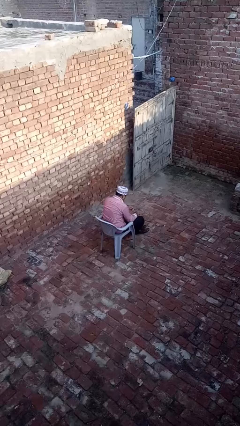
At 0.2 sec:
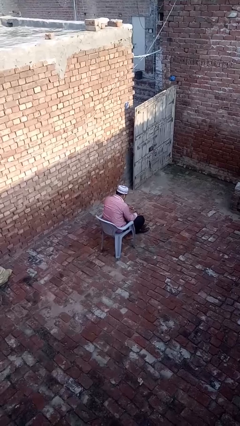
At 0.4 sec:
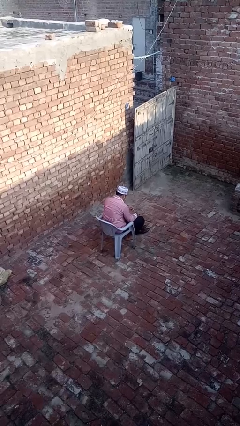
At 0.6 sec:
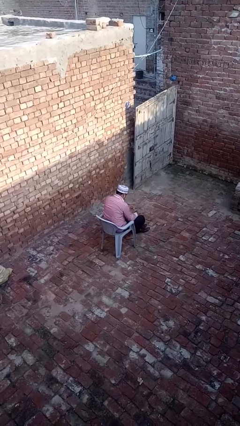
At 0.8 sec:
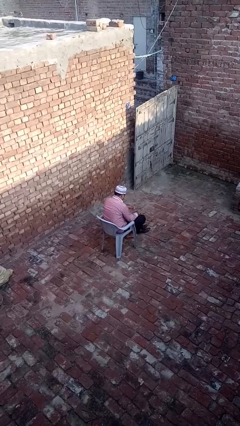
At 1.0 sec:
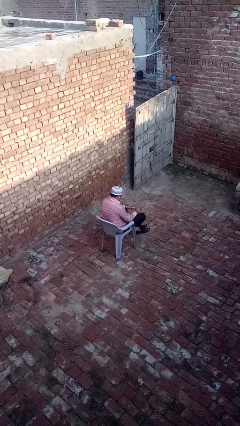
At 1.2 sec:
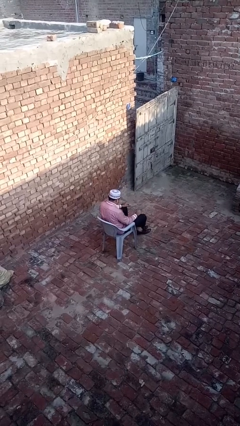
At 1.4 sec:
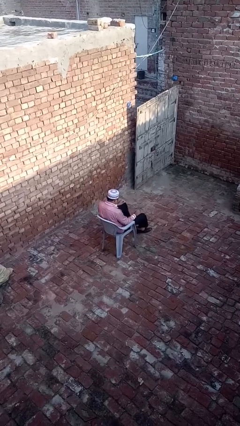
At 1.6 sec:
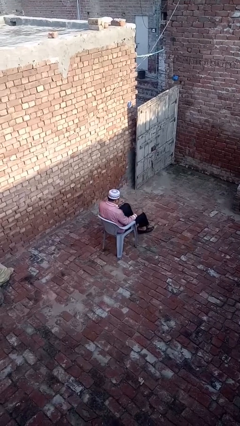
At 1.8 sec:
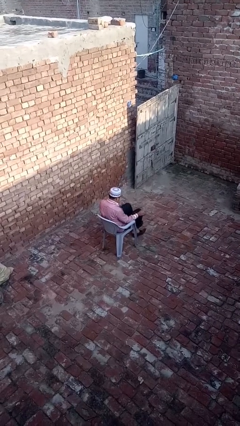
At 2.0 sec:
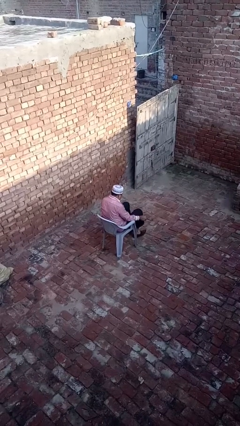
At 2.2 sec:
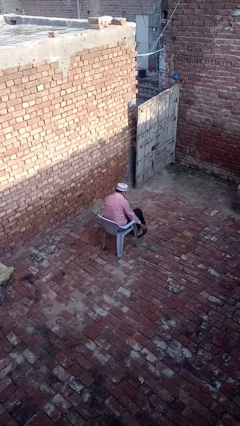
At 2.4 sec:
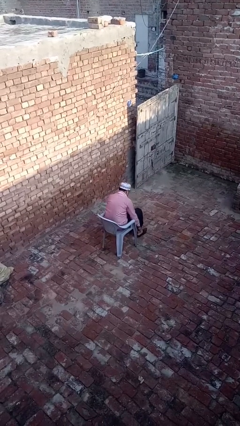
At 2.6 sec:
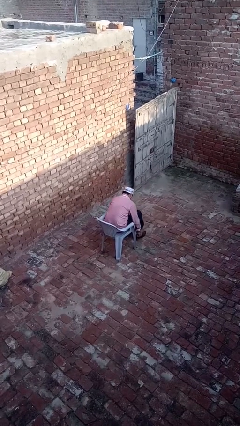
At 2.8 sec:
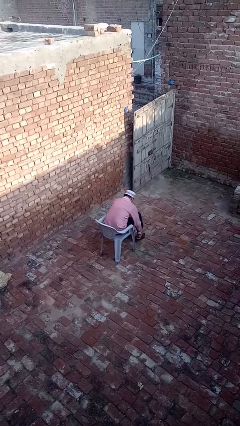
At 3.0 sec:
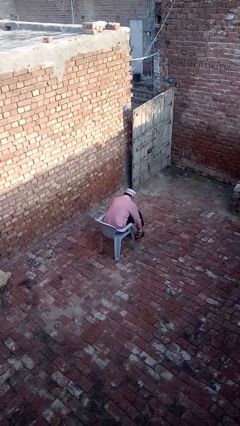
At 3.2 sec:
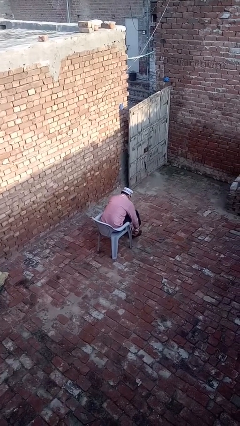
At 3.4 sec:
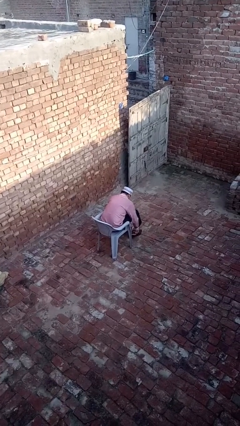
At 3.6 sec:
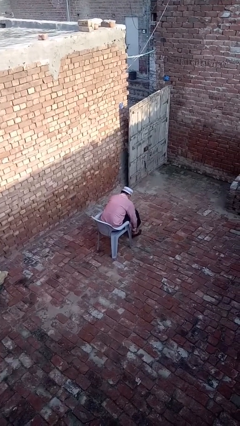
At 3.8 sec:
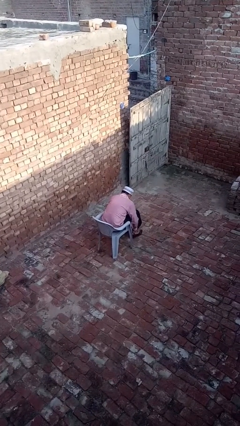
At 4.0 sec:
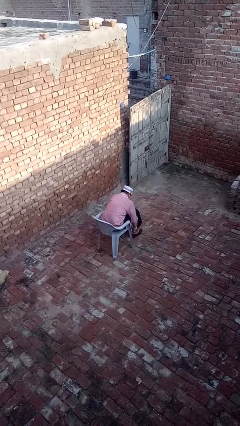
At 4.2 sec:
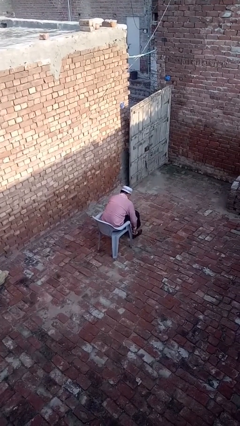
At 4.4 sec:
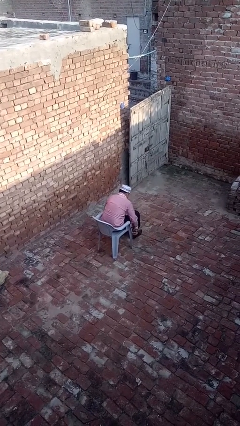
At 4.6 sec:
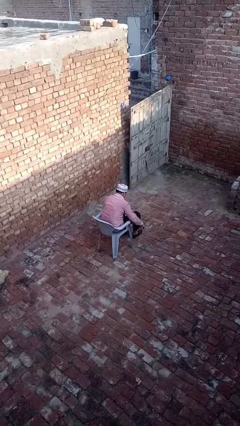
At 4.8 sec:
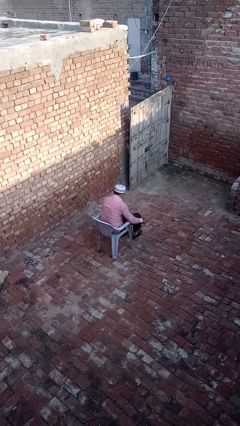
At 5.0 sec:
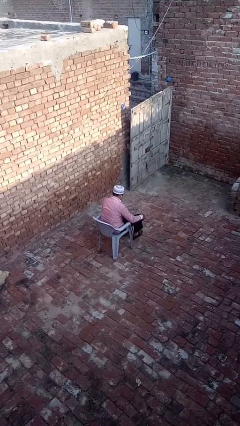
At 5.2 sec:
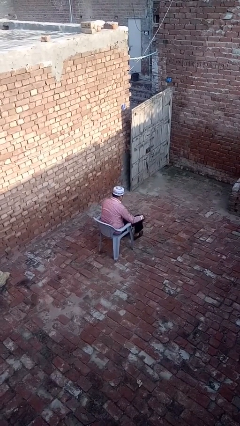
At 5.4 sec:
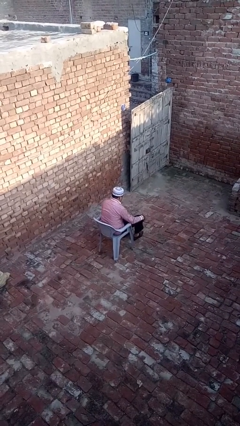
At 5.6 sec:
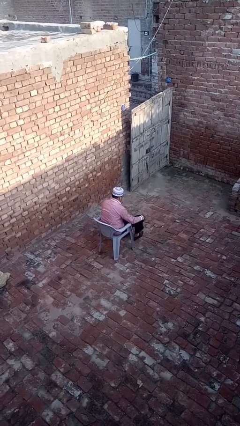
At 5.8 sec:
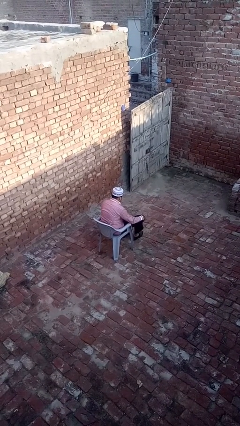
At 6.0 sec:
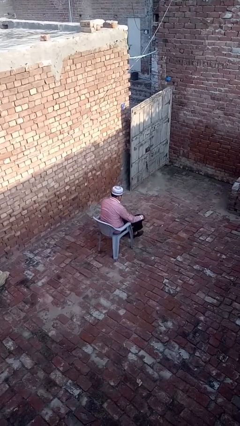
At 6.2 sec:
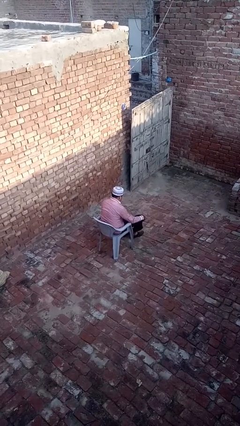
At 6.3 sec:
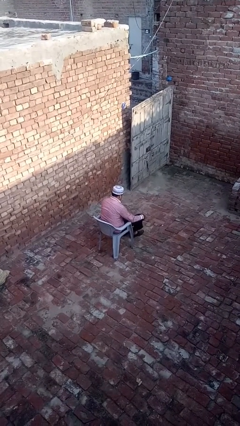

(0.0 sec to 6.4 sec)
person puts on shoes

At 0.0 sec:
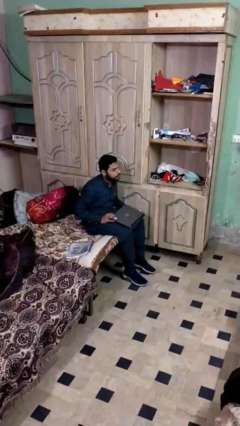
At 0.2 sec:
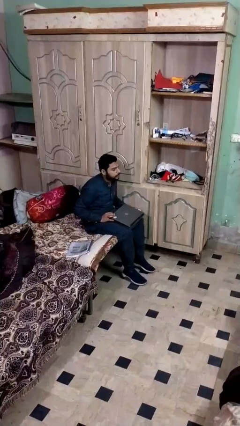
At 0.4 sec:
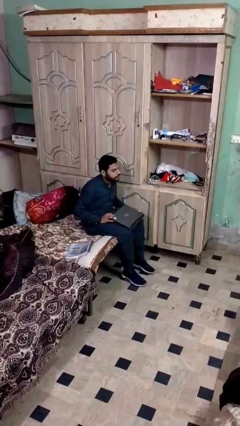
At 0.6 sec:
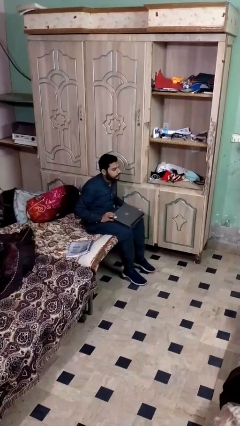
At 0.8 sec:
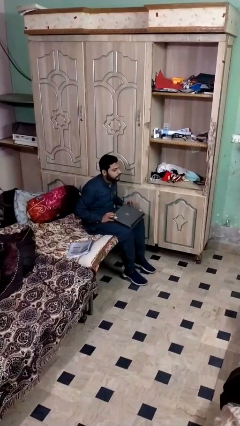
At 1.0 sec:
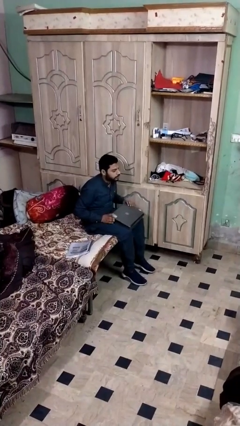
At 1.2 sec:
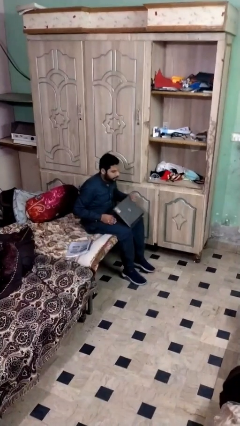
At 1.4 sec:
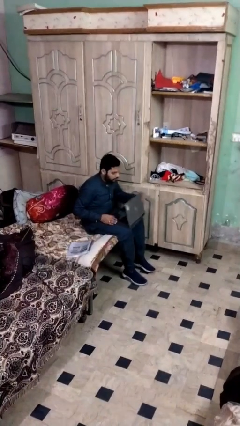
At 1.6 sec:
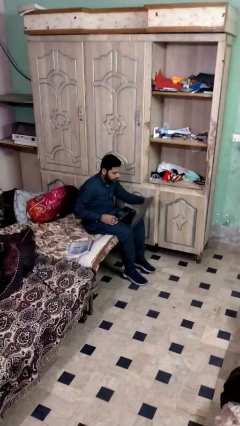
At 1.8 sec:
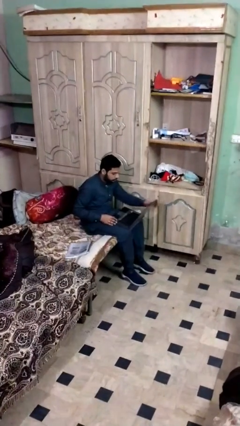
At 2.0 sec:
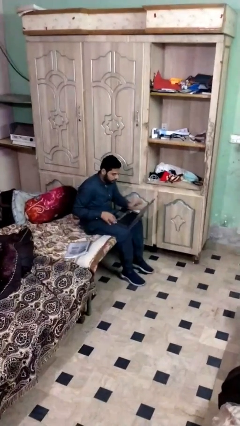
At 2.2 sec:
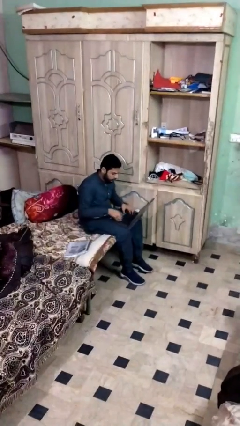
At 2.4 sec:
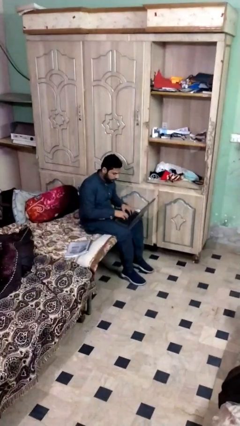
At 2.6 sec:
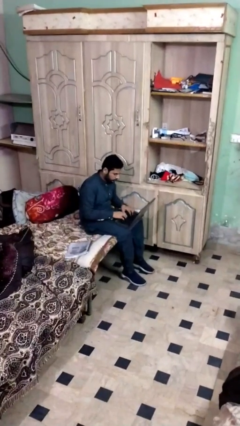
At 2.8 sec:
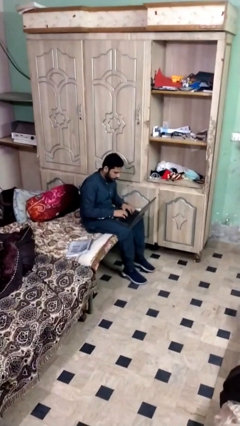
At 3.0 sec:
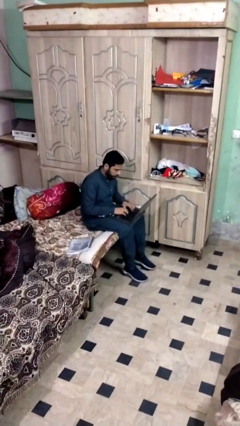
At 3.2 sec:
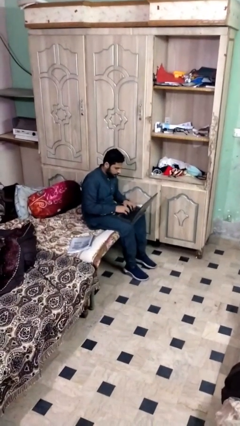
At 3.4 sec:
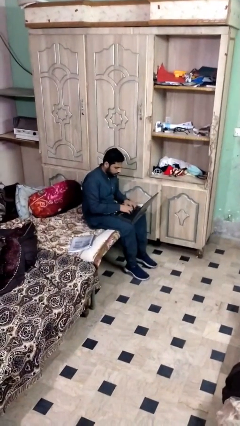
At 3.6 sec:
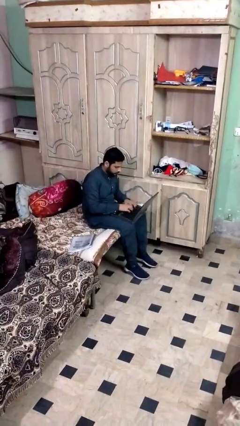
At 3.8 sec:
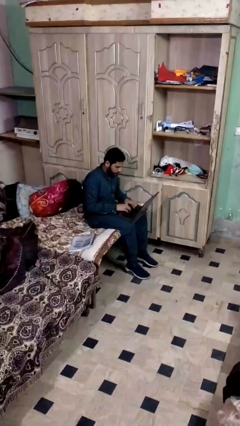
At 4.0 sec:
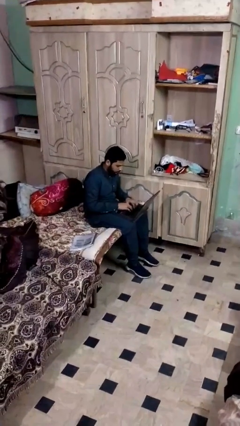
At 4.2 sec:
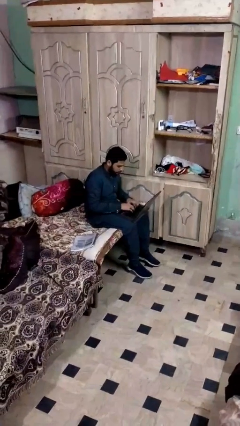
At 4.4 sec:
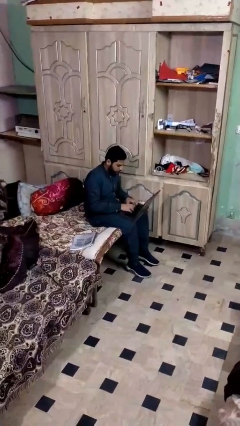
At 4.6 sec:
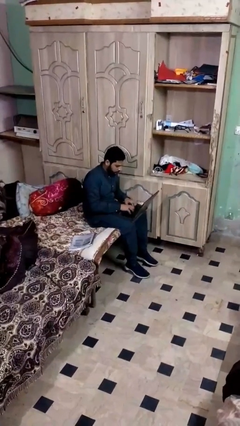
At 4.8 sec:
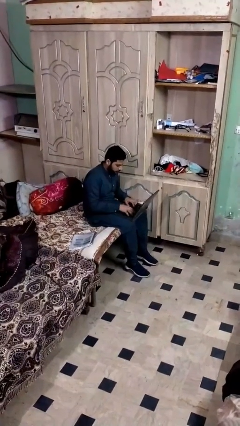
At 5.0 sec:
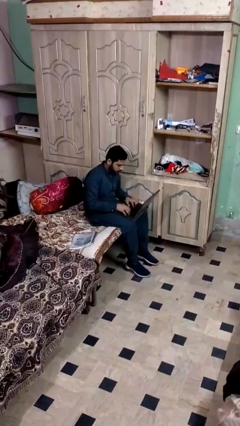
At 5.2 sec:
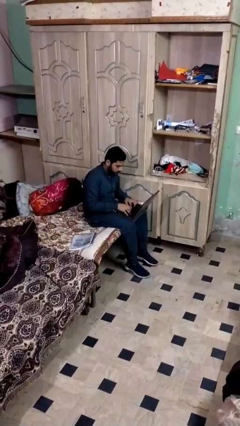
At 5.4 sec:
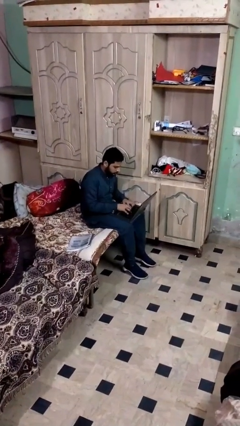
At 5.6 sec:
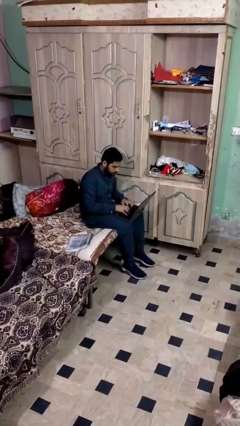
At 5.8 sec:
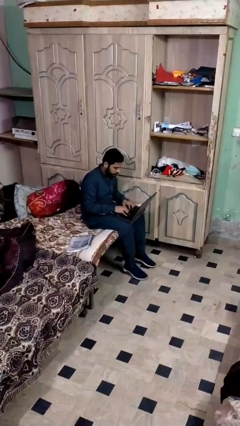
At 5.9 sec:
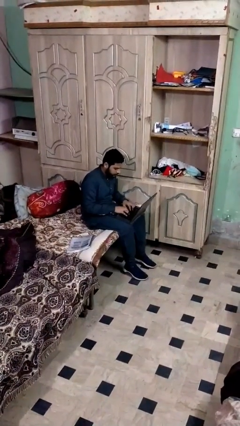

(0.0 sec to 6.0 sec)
person interacts with laptop

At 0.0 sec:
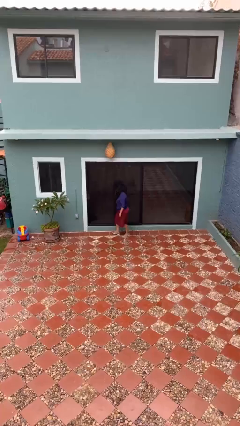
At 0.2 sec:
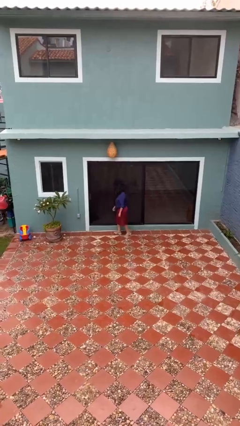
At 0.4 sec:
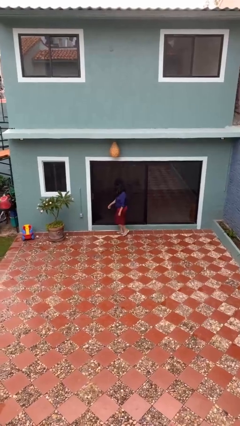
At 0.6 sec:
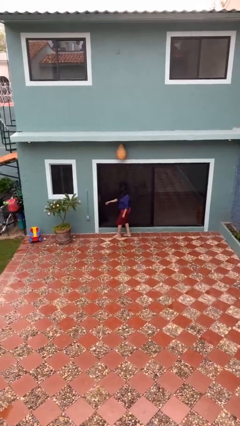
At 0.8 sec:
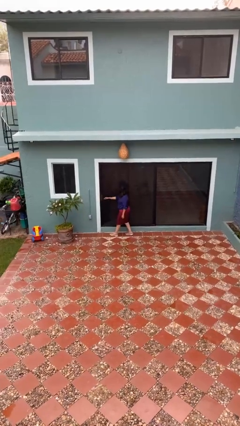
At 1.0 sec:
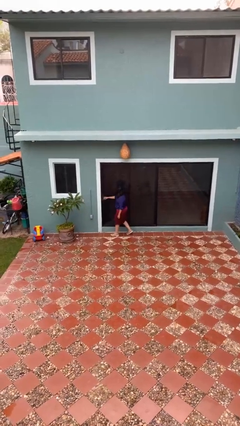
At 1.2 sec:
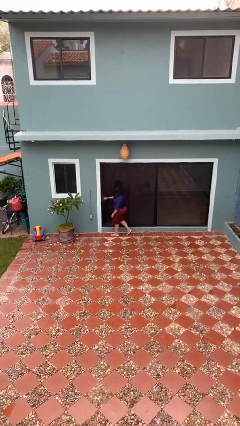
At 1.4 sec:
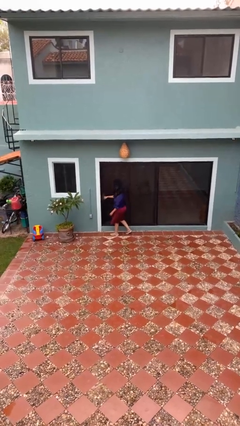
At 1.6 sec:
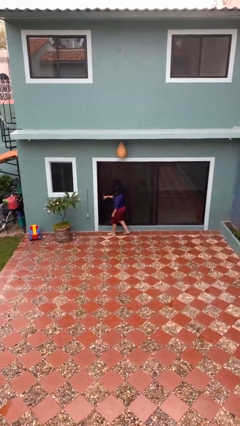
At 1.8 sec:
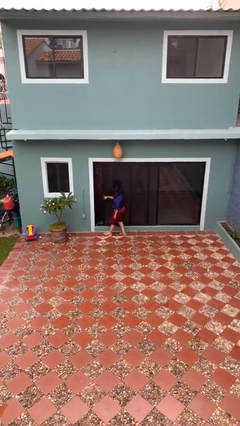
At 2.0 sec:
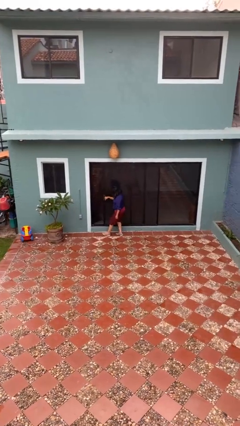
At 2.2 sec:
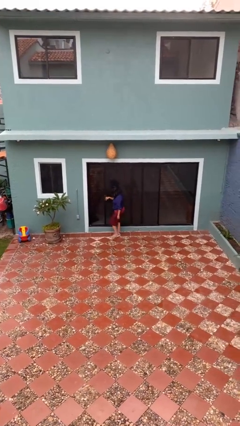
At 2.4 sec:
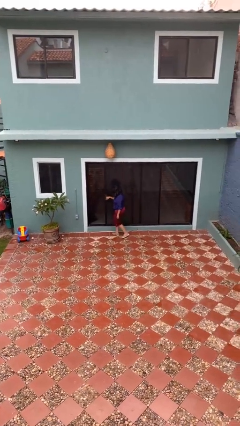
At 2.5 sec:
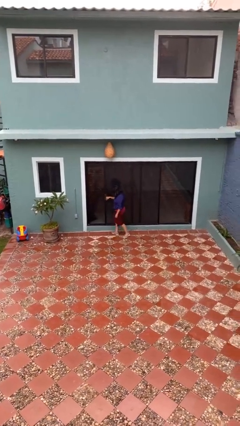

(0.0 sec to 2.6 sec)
person opens sliding door

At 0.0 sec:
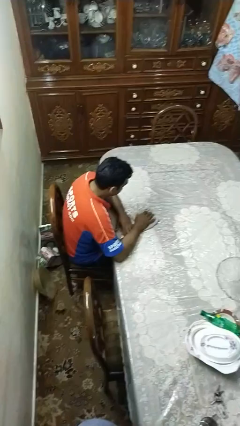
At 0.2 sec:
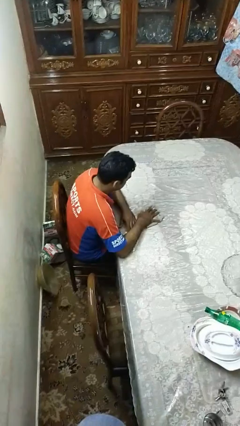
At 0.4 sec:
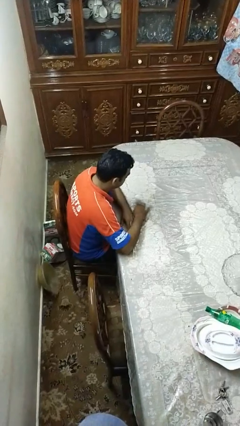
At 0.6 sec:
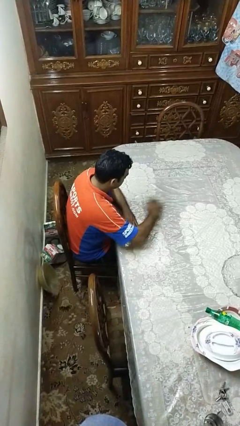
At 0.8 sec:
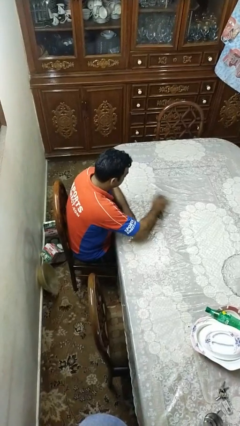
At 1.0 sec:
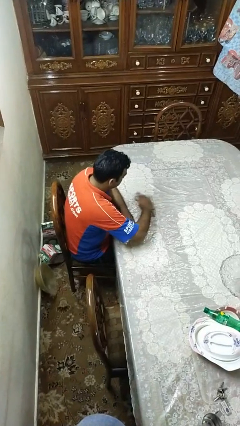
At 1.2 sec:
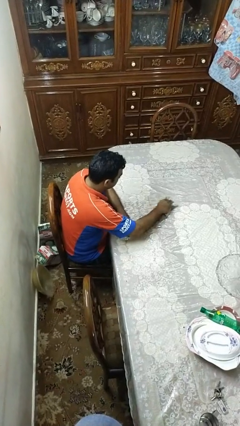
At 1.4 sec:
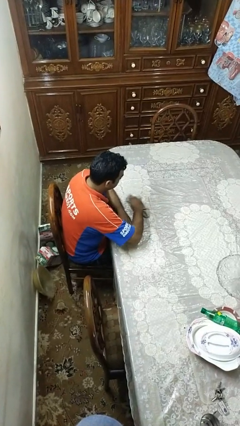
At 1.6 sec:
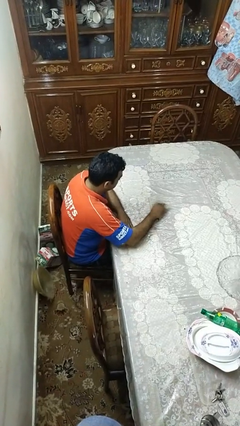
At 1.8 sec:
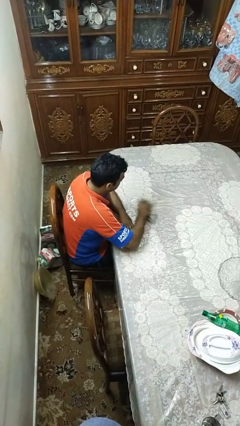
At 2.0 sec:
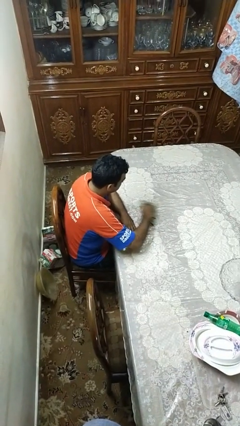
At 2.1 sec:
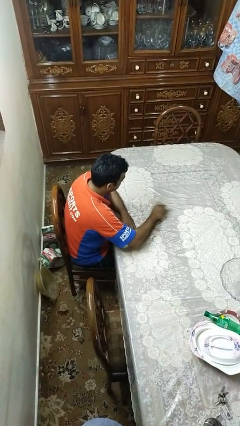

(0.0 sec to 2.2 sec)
person cleans table with rag
